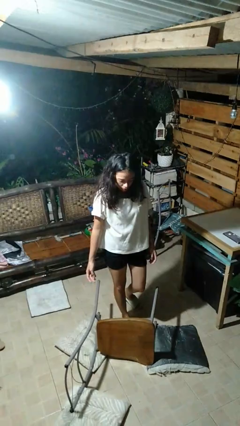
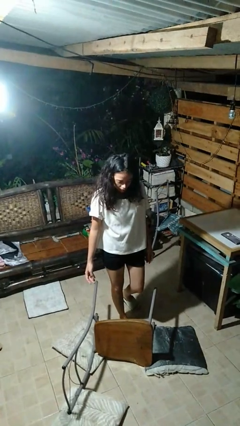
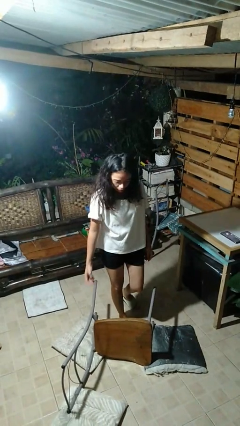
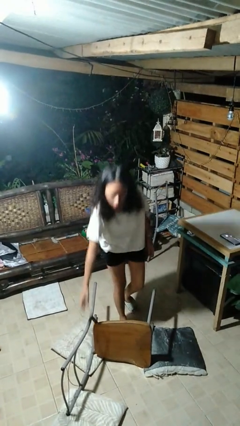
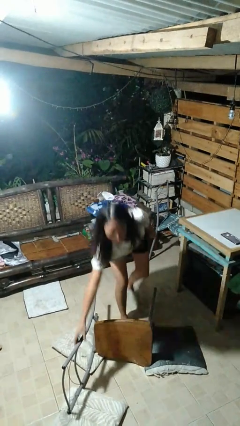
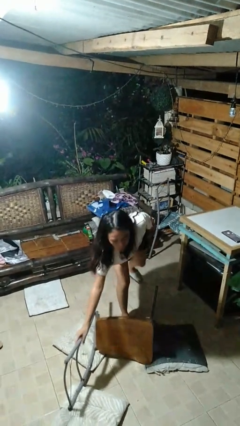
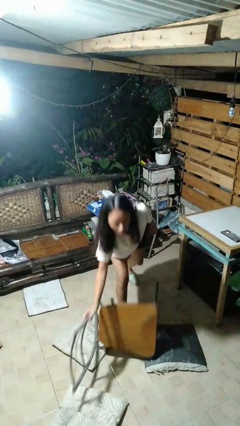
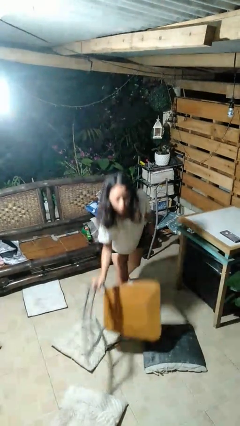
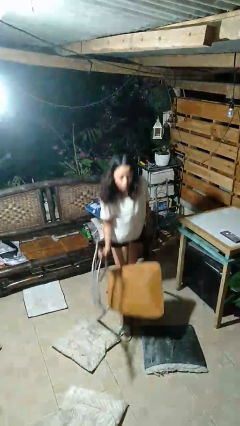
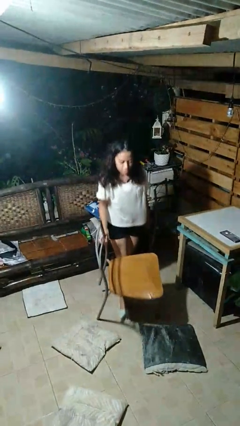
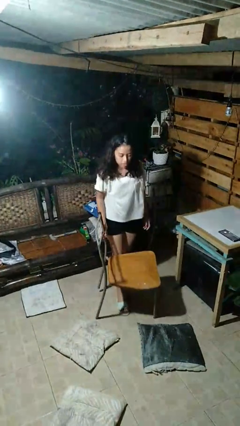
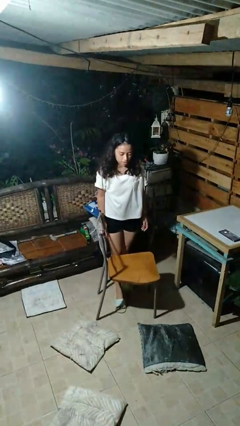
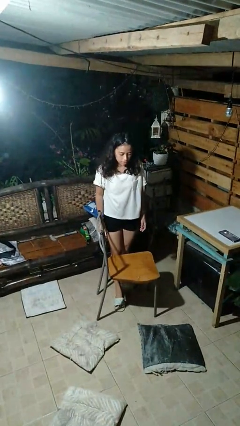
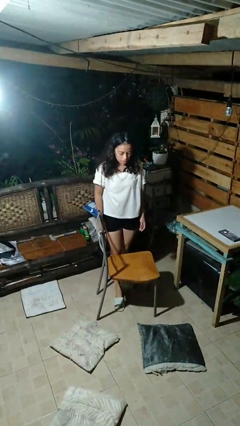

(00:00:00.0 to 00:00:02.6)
person sets upright furniture

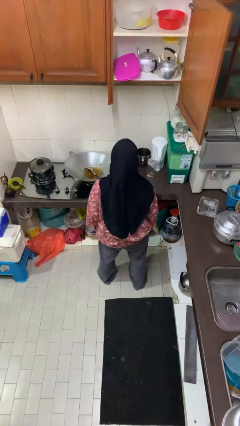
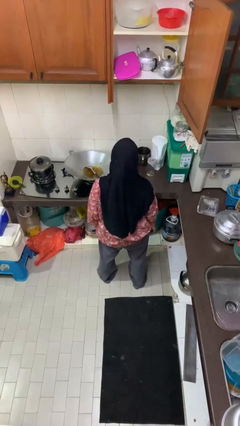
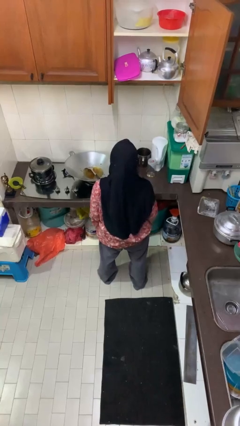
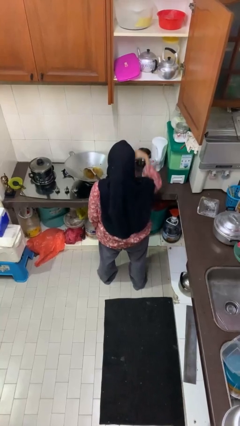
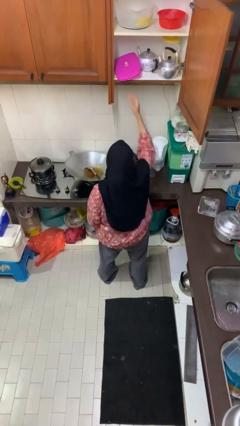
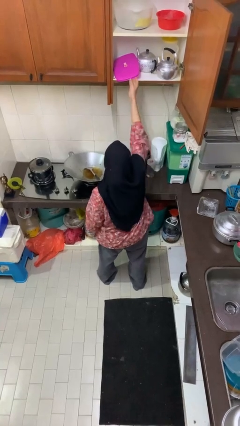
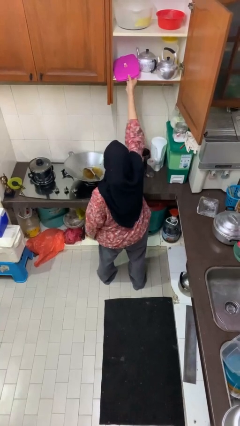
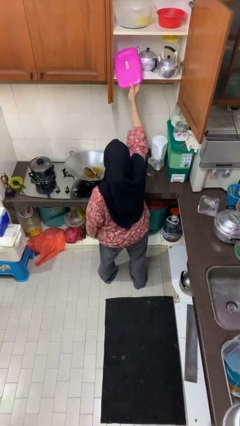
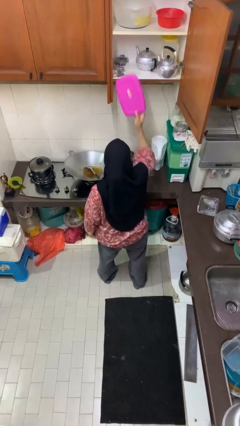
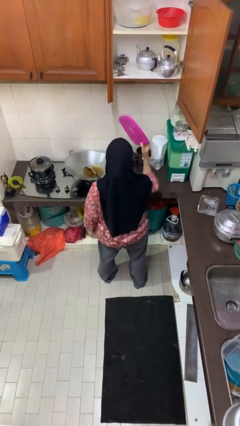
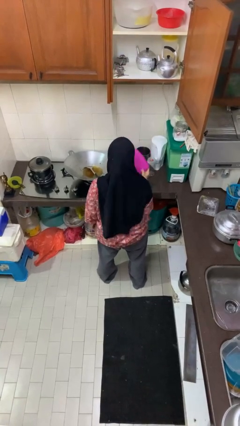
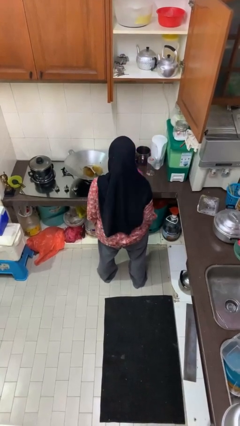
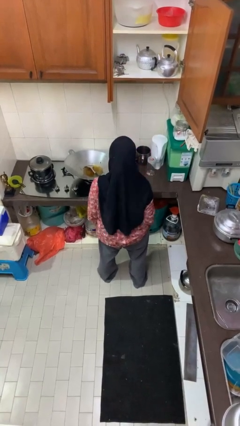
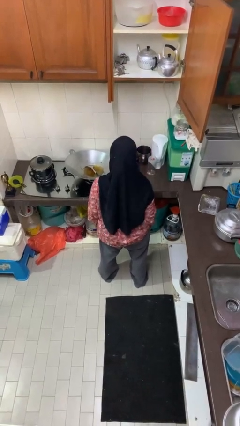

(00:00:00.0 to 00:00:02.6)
person takes object from cabinet

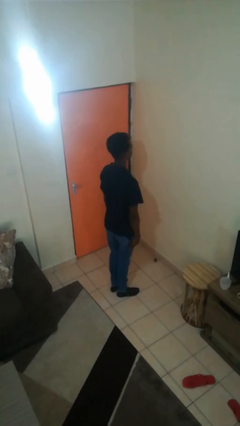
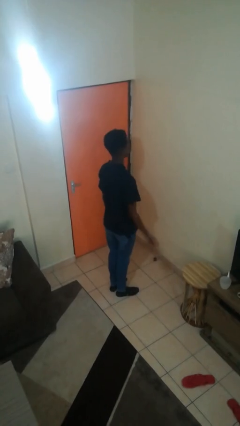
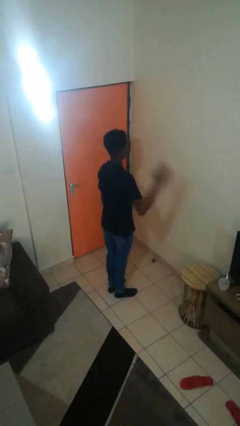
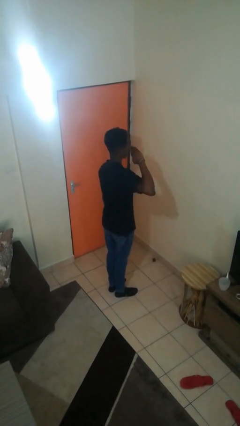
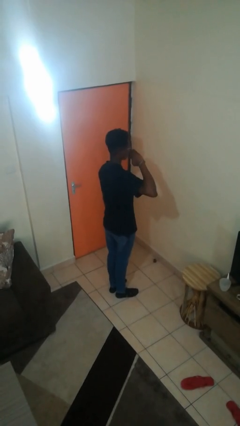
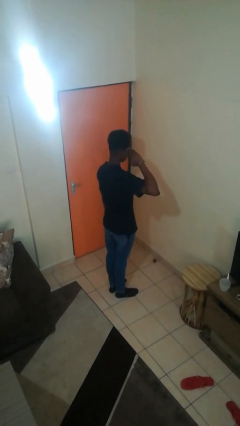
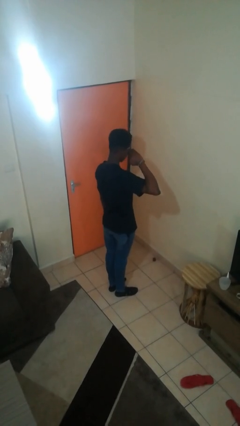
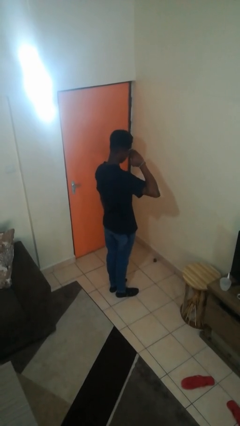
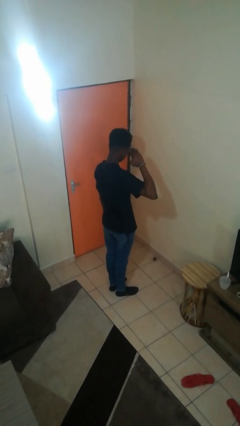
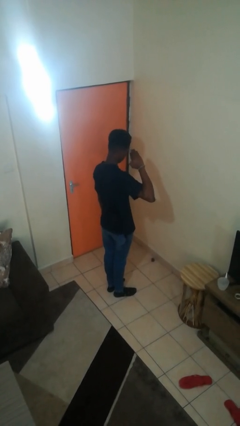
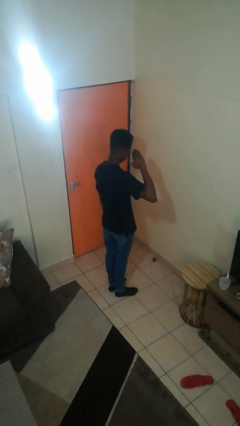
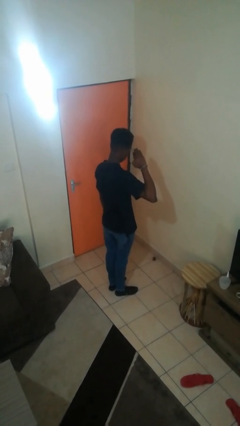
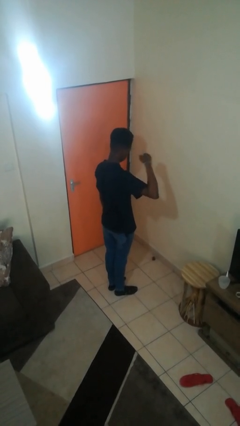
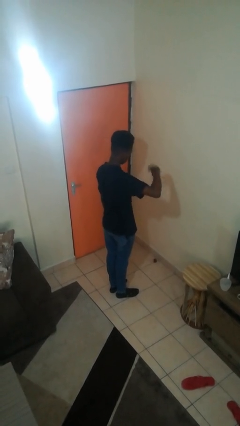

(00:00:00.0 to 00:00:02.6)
person salutes

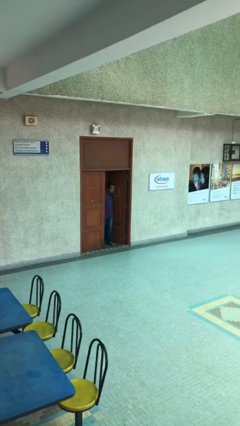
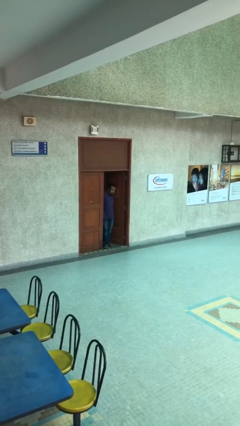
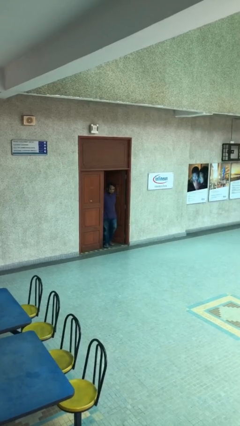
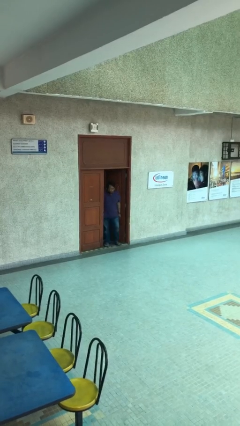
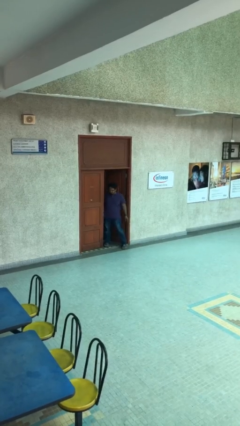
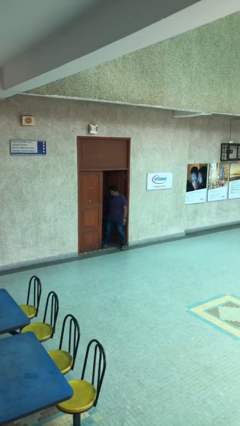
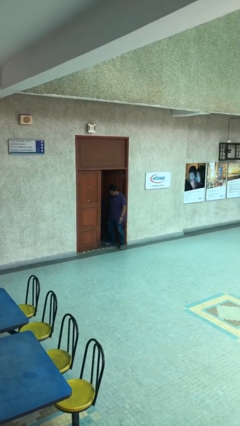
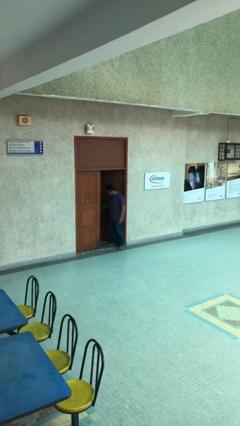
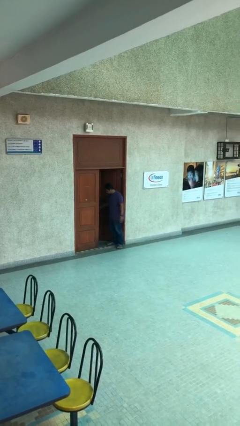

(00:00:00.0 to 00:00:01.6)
person enters scene through structure

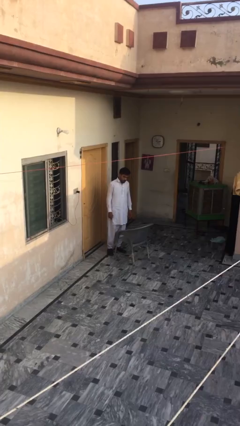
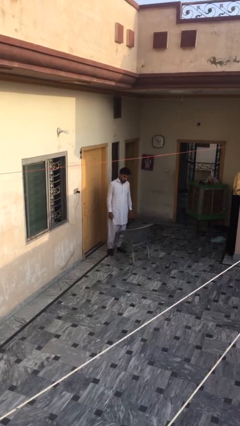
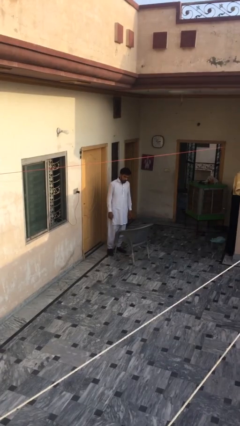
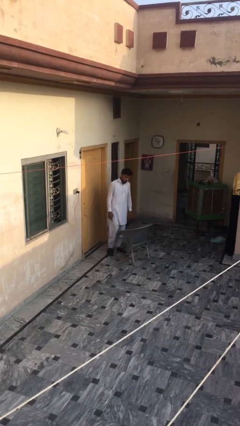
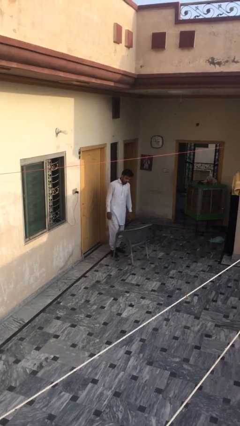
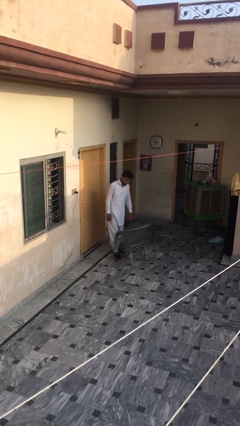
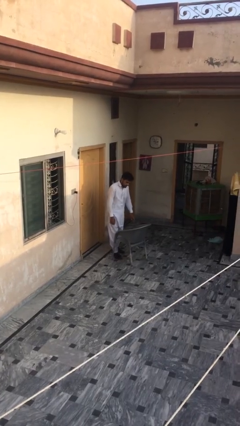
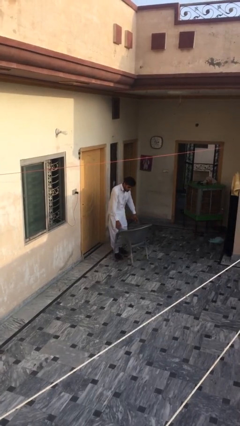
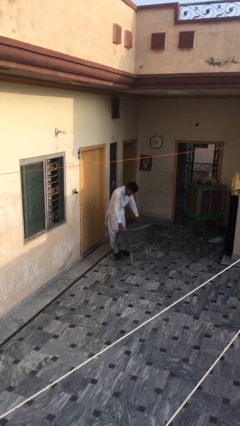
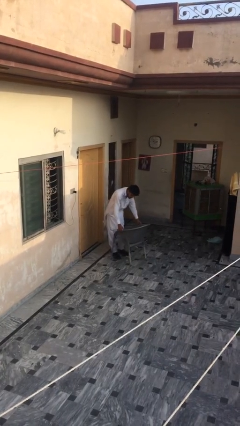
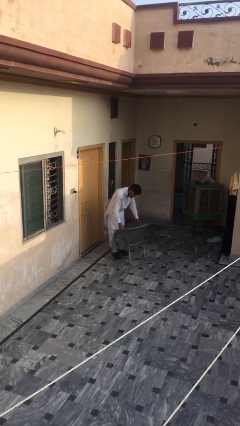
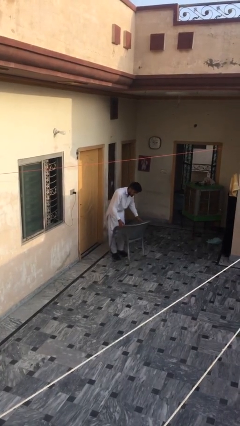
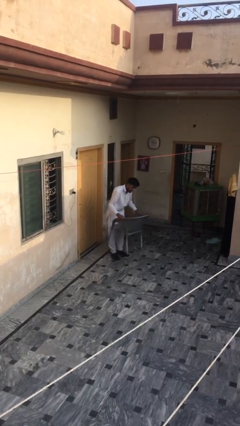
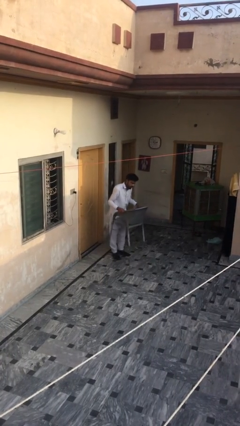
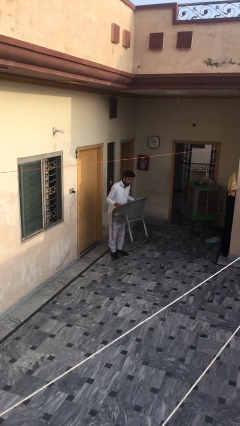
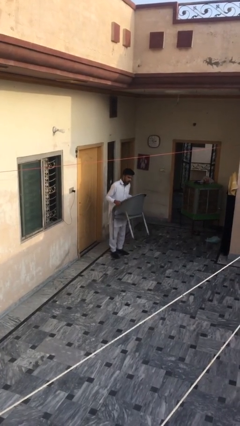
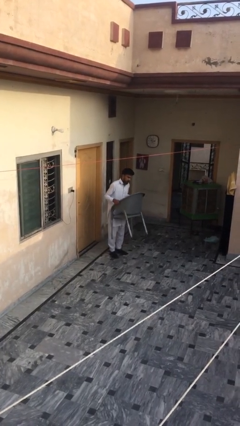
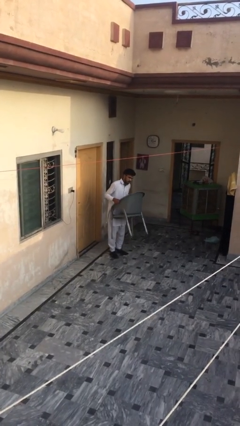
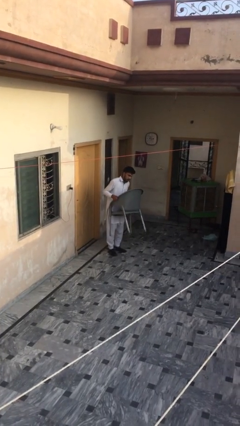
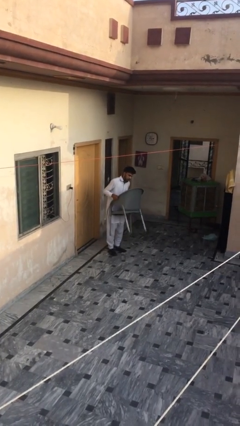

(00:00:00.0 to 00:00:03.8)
person picks up object from floor

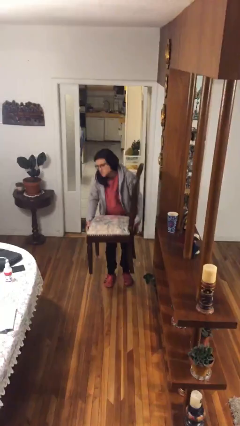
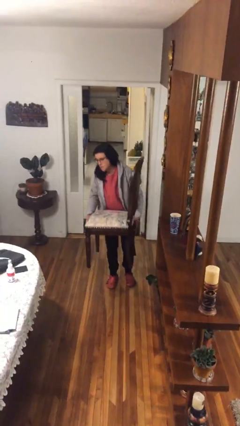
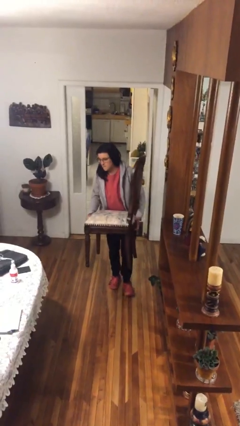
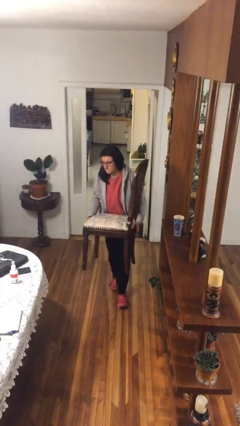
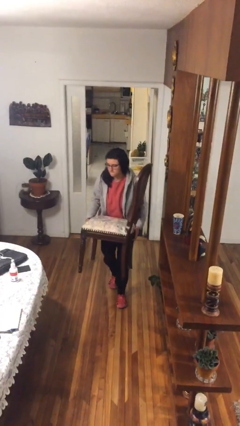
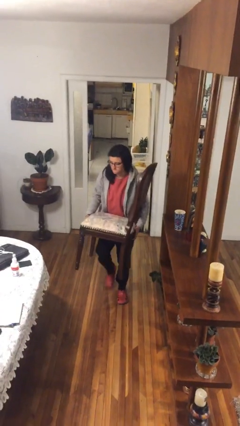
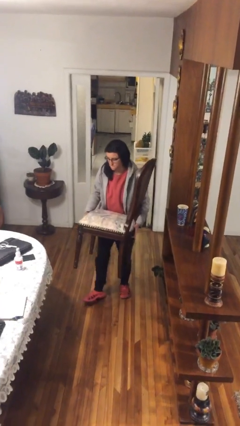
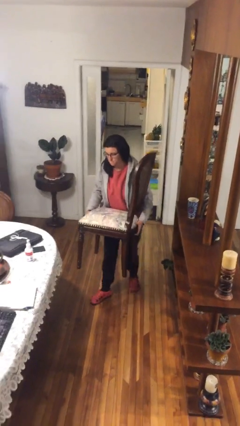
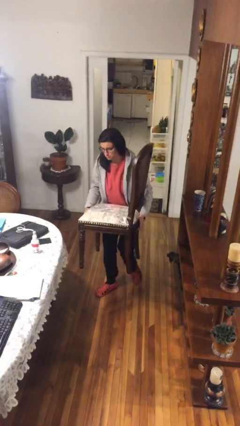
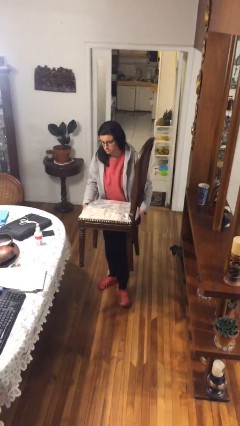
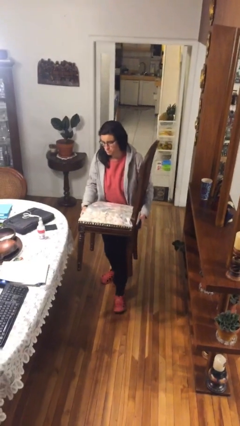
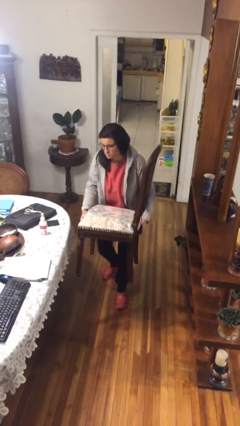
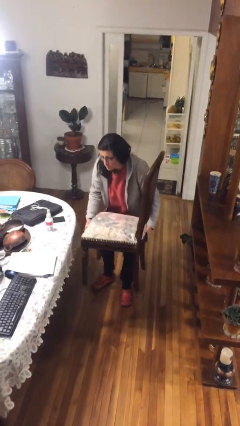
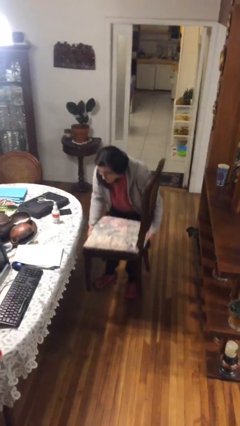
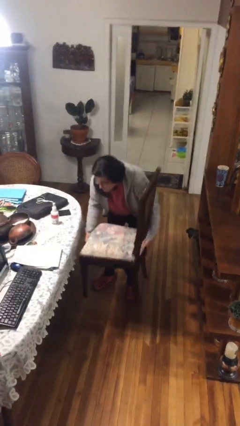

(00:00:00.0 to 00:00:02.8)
person carries heavy object

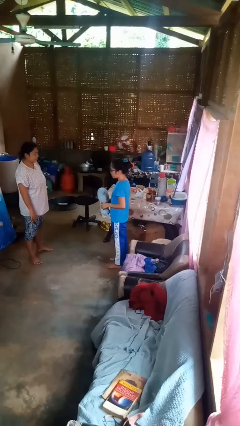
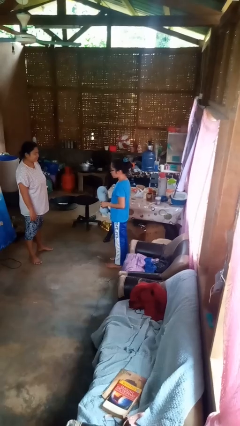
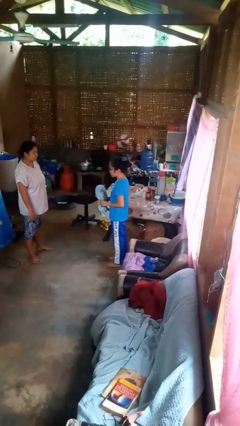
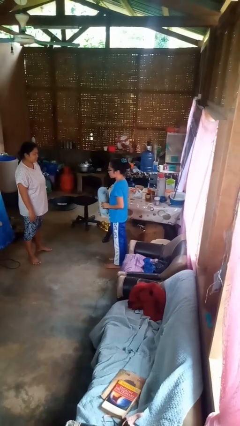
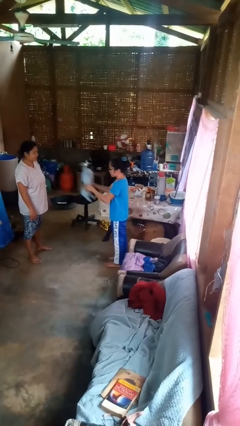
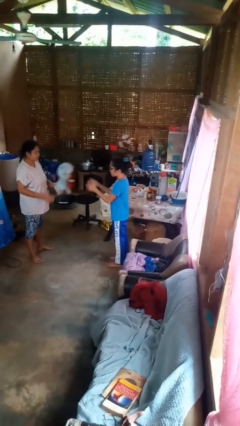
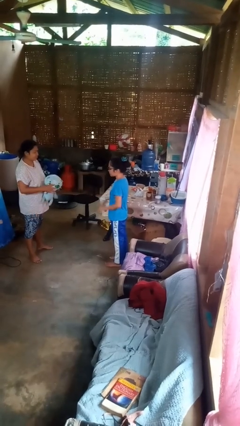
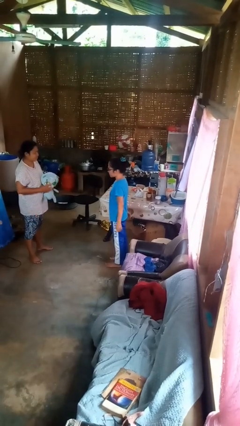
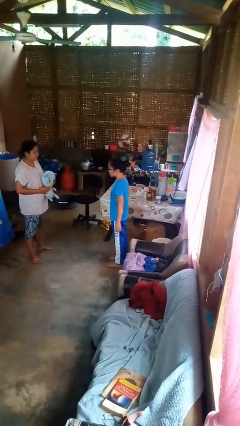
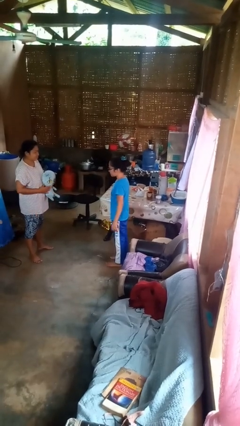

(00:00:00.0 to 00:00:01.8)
person throws object to person
